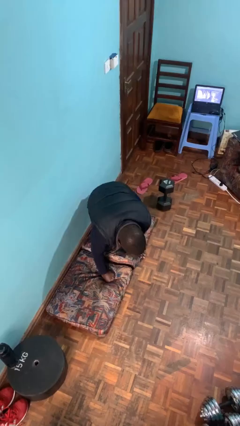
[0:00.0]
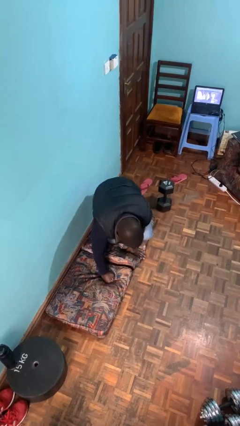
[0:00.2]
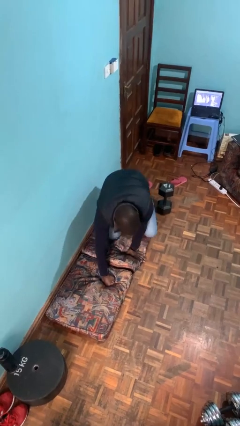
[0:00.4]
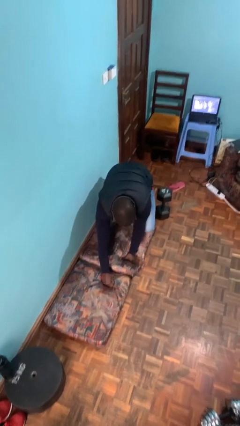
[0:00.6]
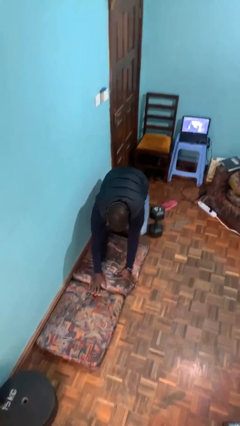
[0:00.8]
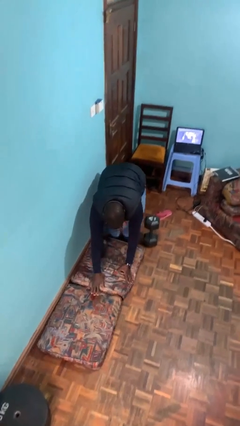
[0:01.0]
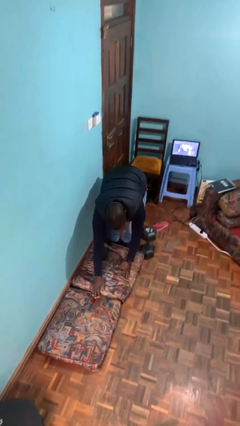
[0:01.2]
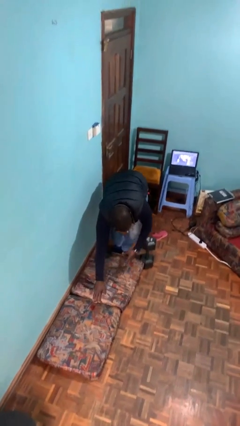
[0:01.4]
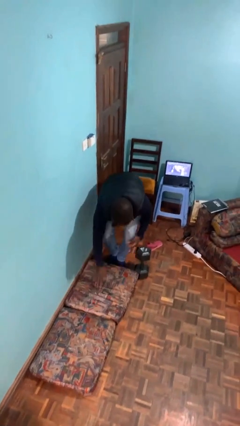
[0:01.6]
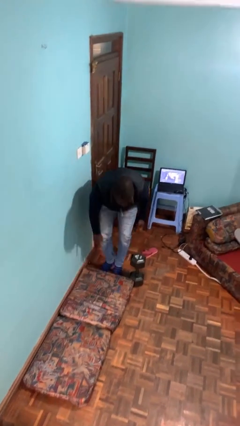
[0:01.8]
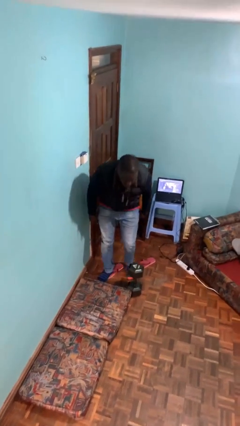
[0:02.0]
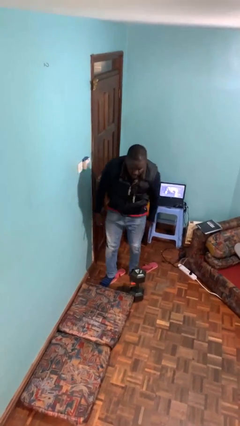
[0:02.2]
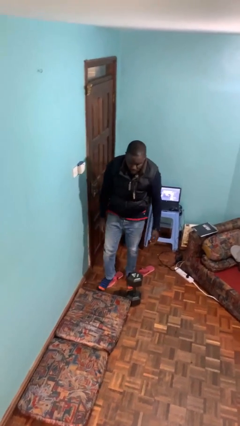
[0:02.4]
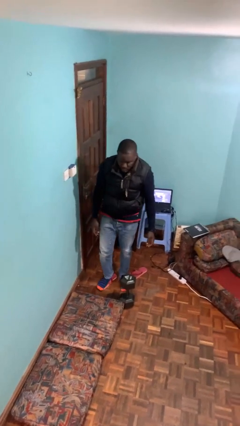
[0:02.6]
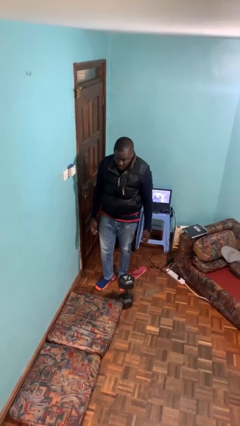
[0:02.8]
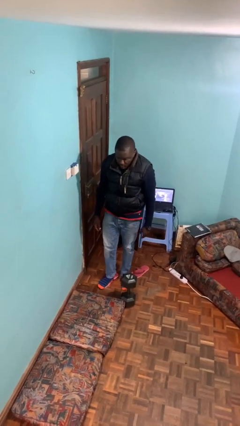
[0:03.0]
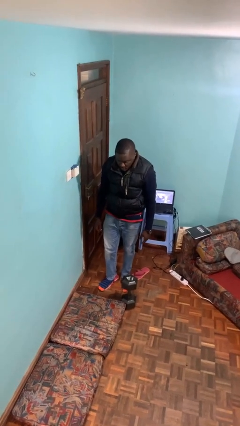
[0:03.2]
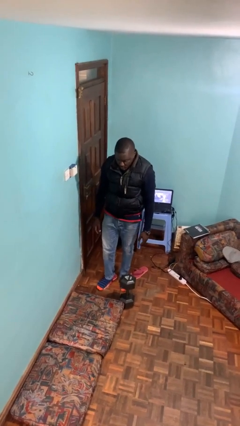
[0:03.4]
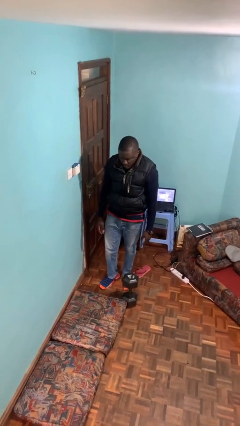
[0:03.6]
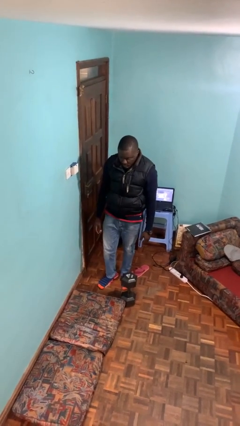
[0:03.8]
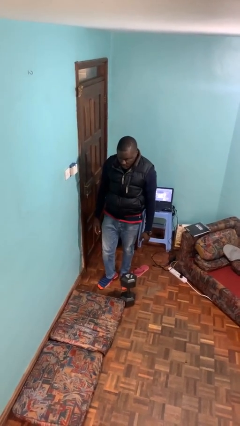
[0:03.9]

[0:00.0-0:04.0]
person stands up from floor

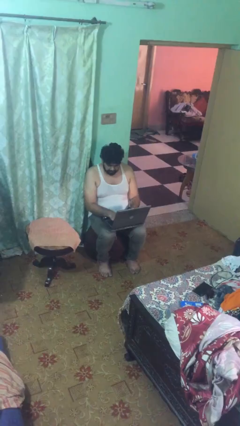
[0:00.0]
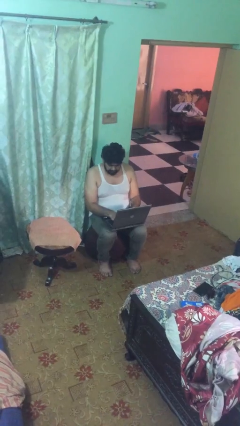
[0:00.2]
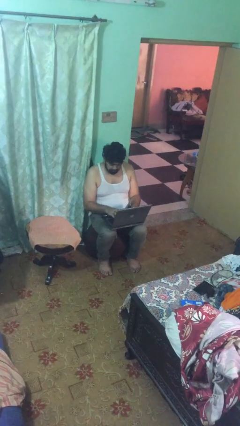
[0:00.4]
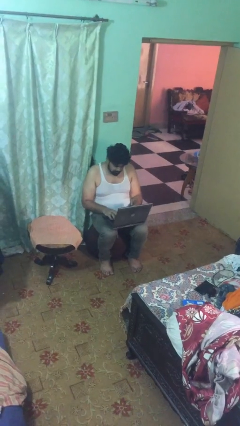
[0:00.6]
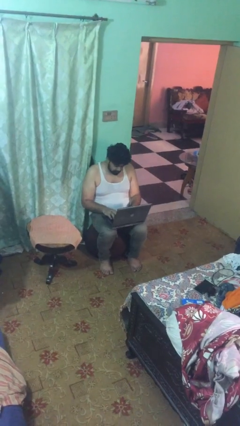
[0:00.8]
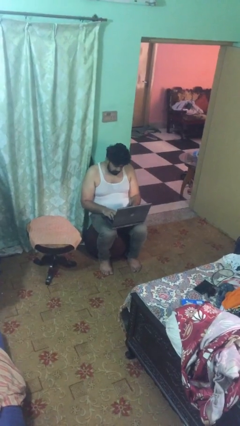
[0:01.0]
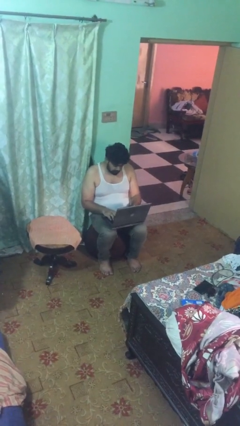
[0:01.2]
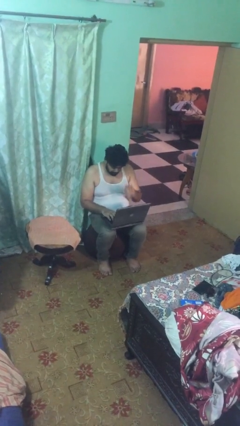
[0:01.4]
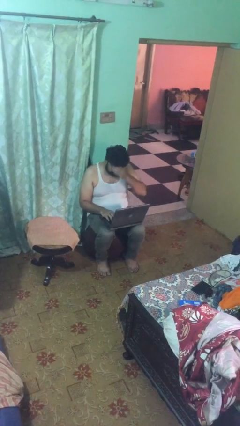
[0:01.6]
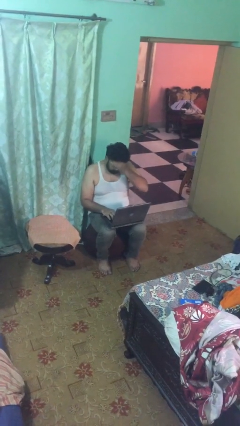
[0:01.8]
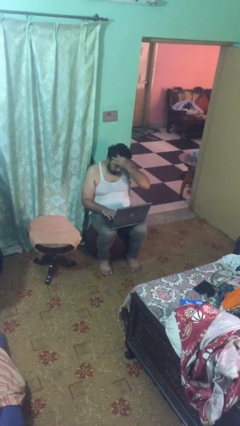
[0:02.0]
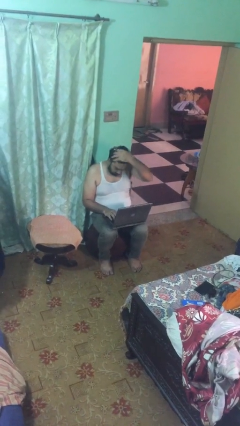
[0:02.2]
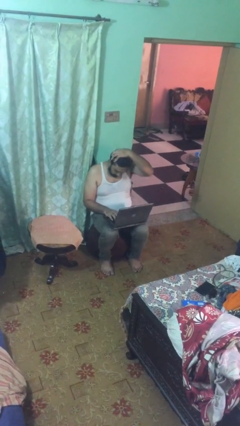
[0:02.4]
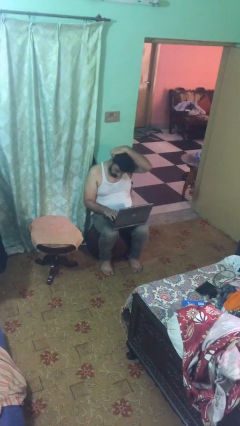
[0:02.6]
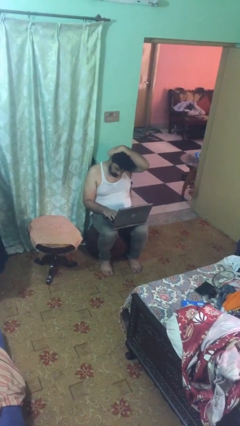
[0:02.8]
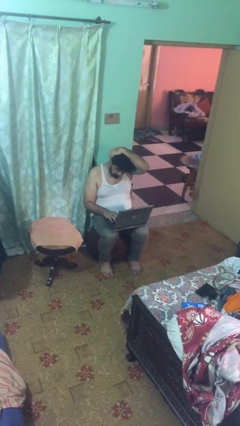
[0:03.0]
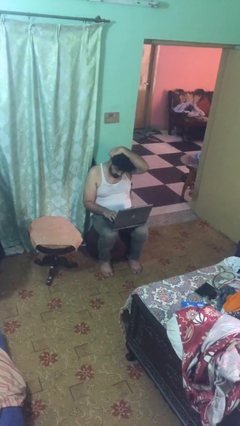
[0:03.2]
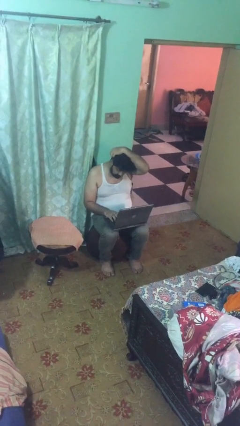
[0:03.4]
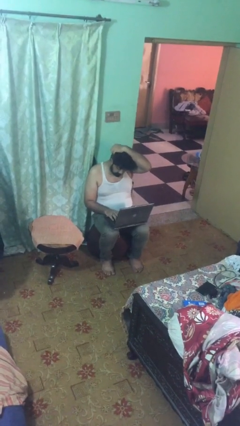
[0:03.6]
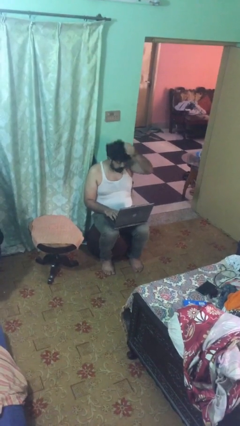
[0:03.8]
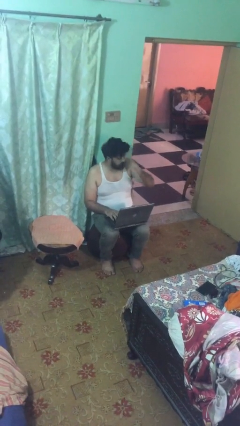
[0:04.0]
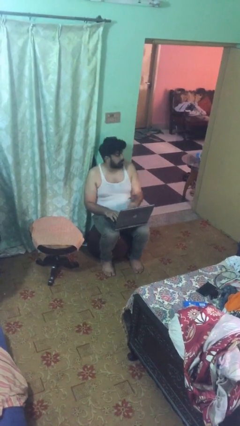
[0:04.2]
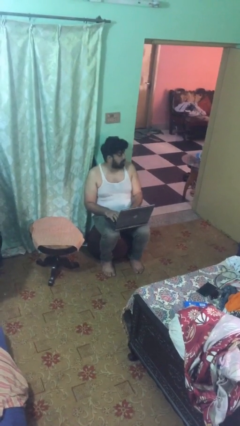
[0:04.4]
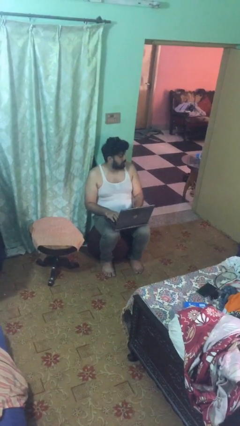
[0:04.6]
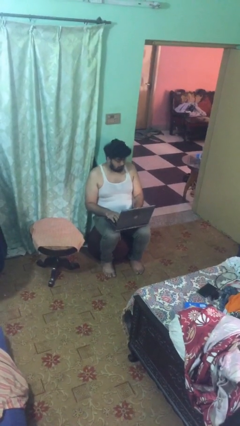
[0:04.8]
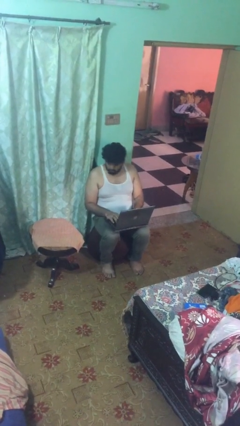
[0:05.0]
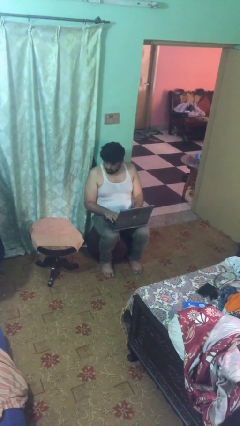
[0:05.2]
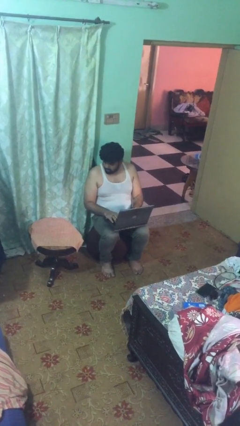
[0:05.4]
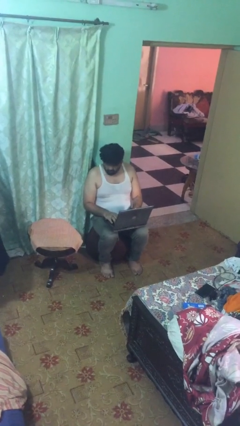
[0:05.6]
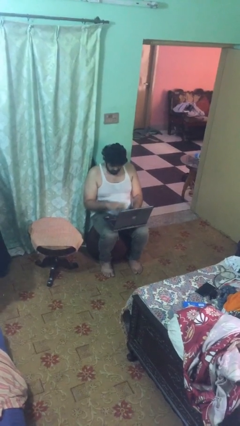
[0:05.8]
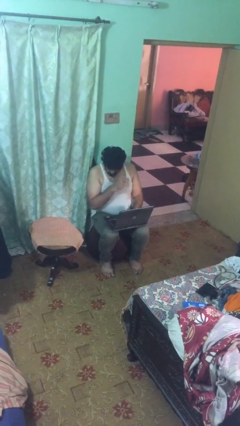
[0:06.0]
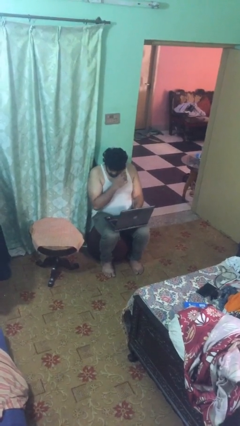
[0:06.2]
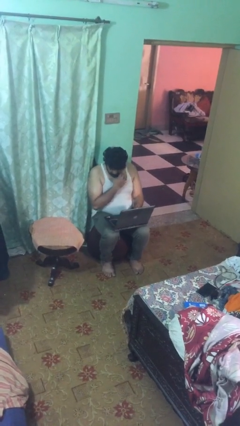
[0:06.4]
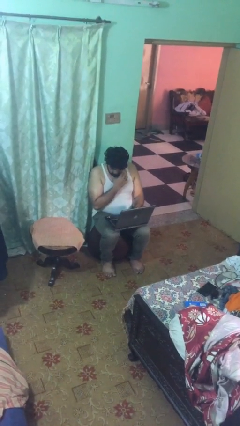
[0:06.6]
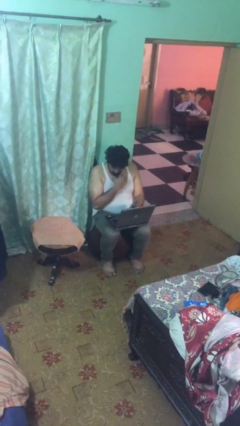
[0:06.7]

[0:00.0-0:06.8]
person interacts with laptop

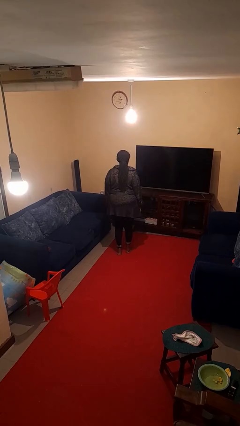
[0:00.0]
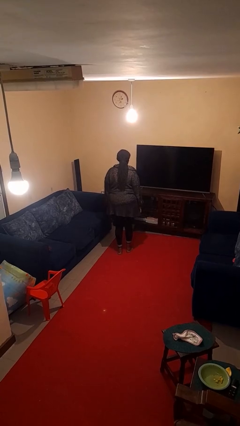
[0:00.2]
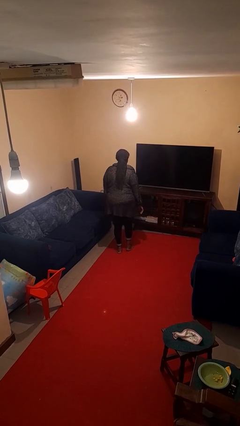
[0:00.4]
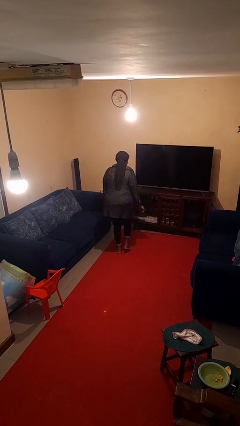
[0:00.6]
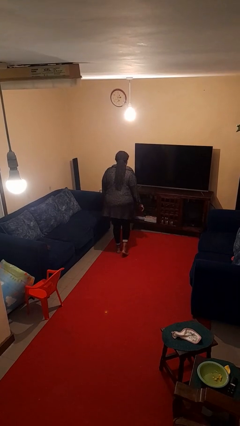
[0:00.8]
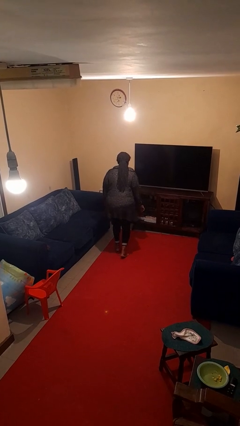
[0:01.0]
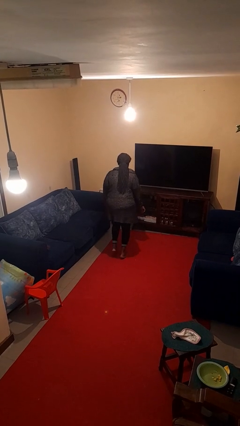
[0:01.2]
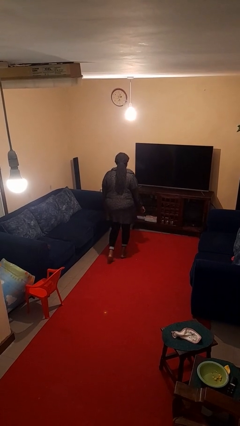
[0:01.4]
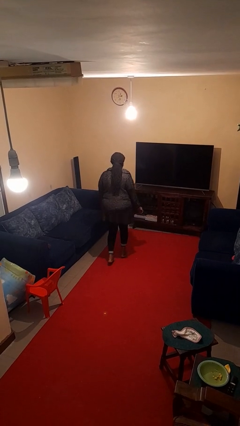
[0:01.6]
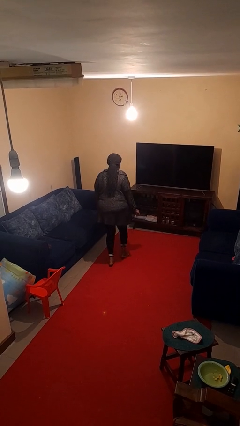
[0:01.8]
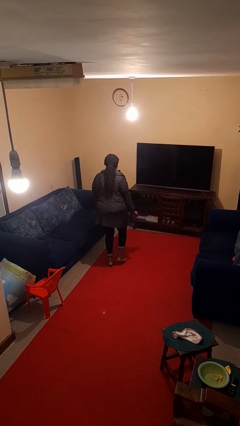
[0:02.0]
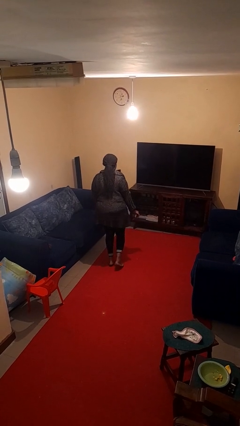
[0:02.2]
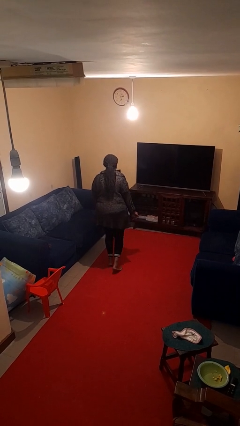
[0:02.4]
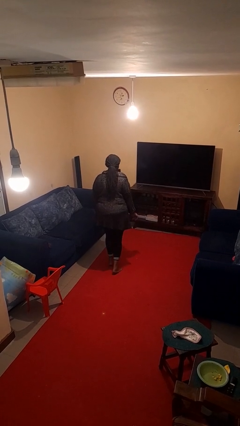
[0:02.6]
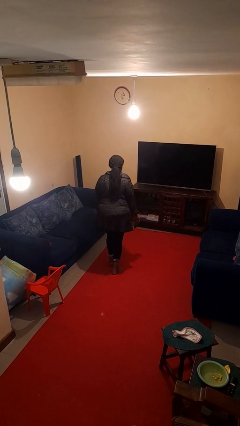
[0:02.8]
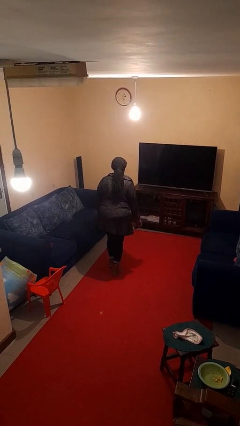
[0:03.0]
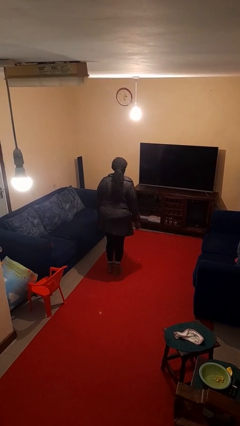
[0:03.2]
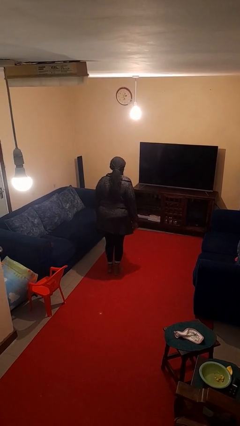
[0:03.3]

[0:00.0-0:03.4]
person walks tiptoe

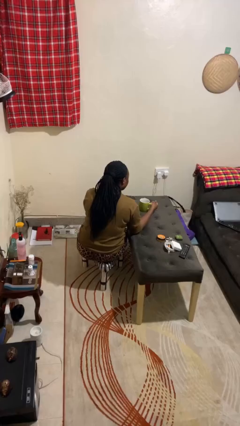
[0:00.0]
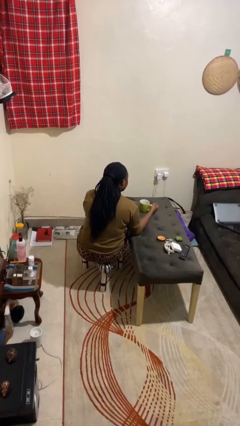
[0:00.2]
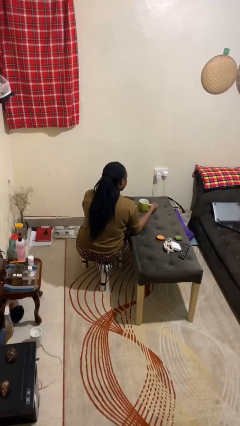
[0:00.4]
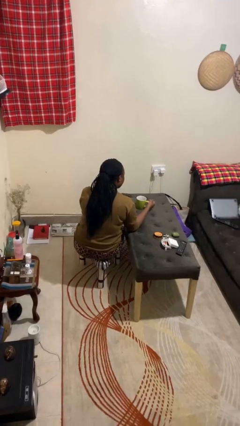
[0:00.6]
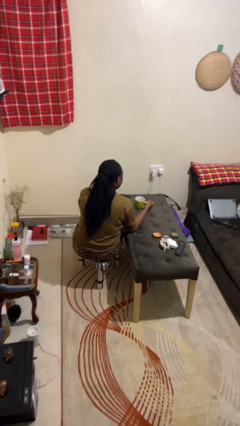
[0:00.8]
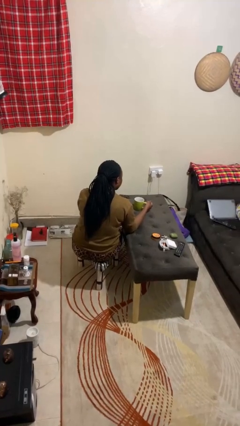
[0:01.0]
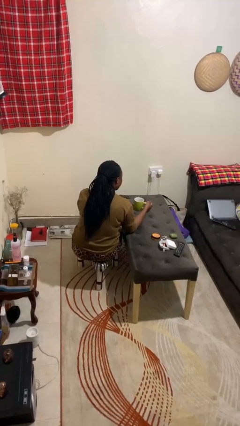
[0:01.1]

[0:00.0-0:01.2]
person drinks from mug

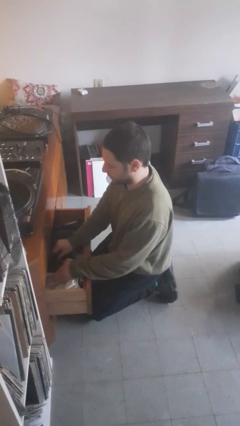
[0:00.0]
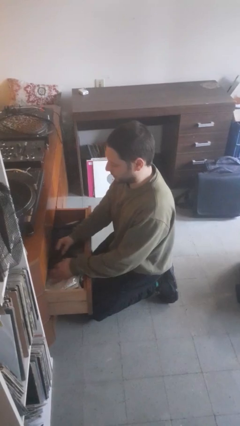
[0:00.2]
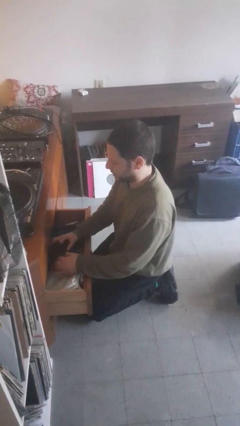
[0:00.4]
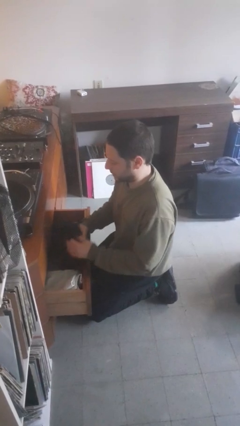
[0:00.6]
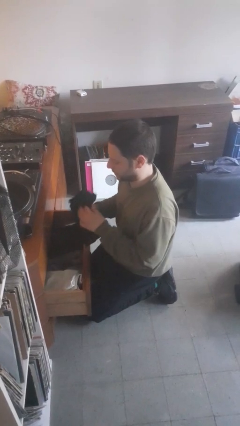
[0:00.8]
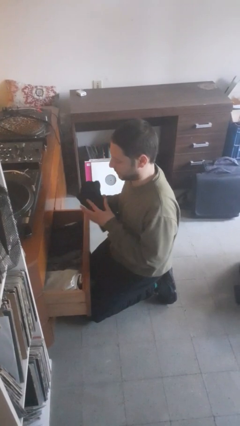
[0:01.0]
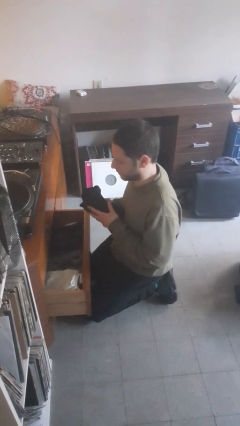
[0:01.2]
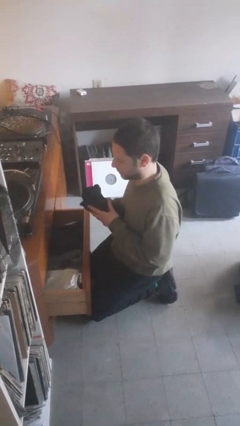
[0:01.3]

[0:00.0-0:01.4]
person takes clothes from dresser

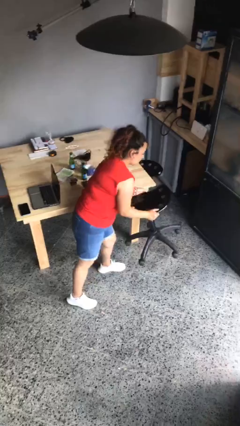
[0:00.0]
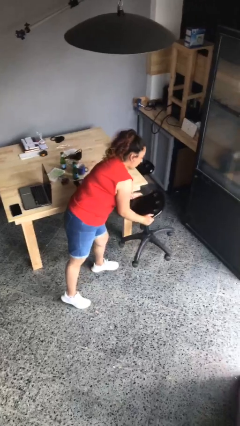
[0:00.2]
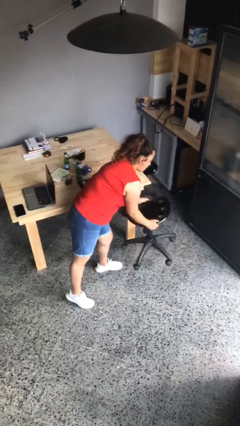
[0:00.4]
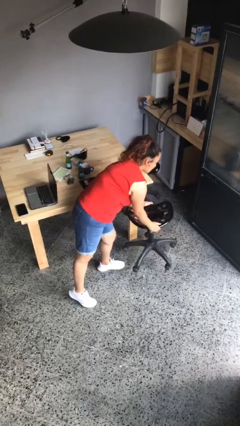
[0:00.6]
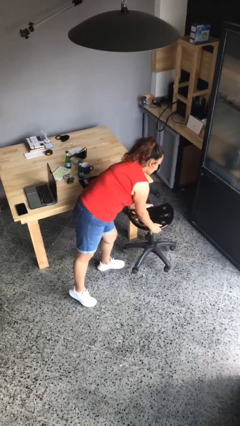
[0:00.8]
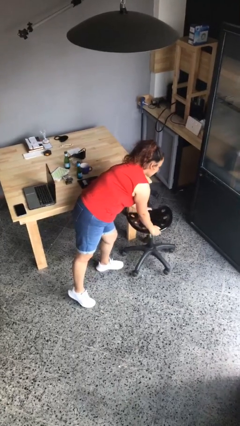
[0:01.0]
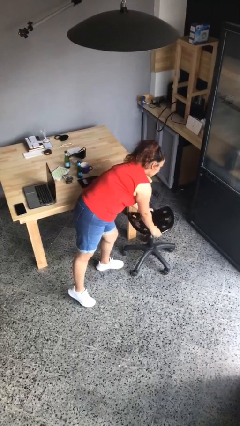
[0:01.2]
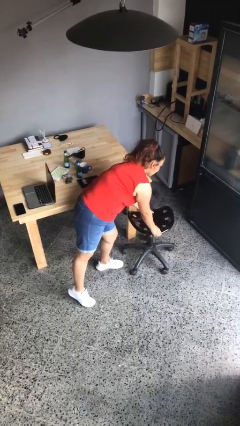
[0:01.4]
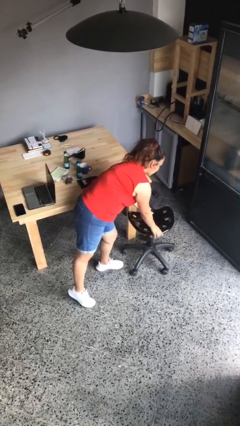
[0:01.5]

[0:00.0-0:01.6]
person puts down object on floor
